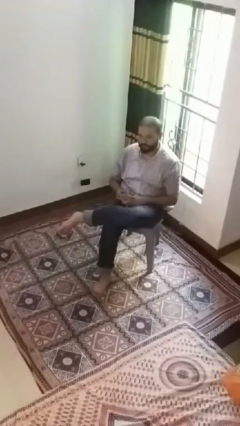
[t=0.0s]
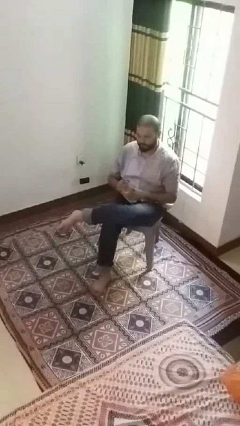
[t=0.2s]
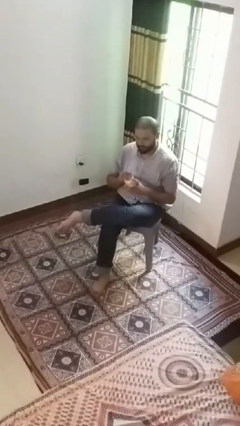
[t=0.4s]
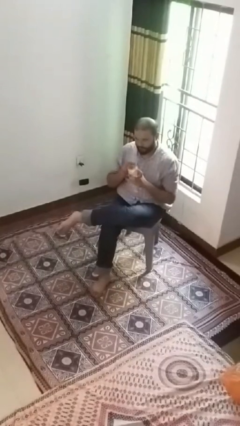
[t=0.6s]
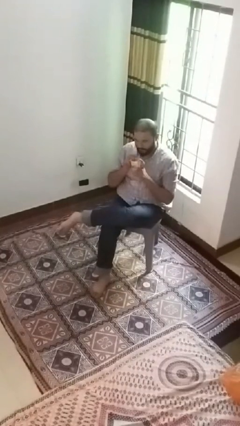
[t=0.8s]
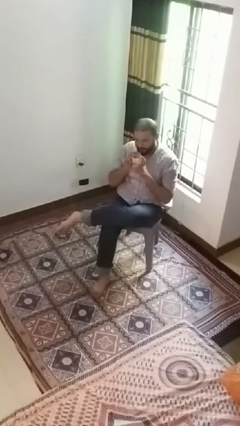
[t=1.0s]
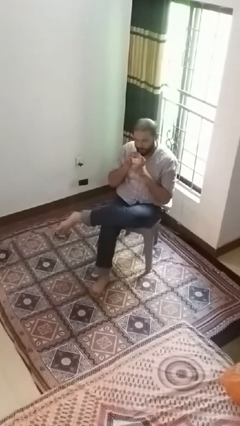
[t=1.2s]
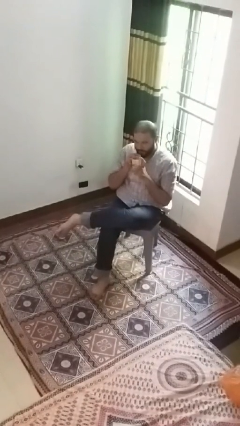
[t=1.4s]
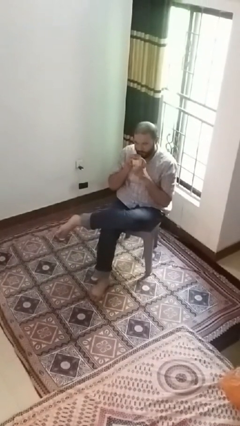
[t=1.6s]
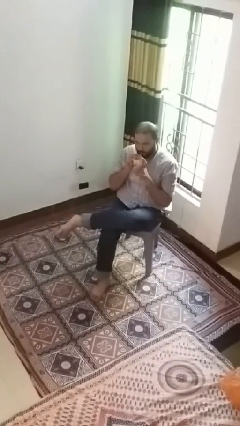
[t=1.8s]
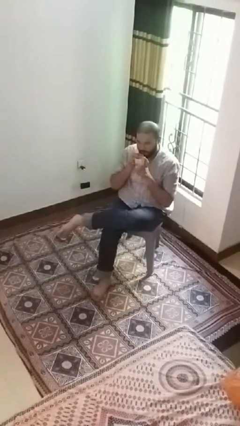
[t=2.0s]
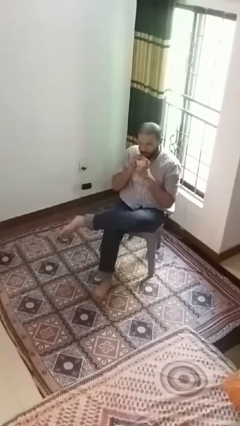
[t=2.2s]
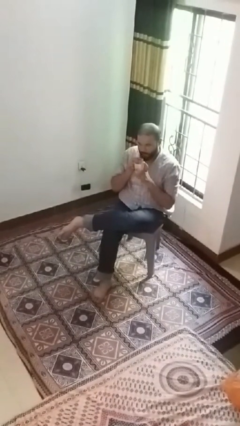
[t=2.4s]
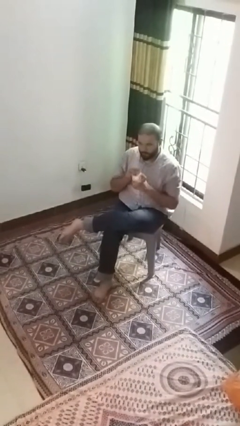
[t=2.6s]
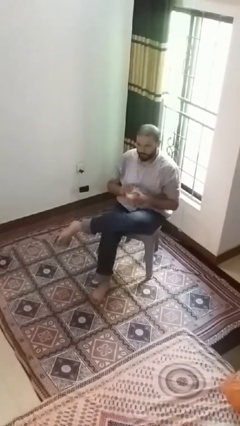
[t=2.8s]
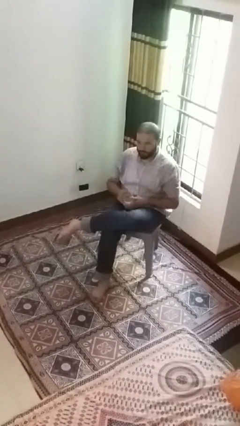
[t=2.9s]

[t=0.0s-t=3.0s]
person drinks from straw

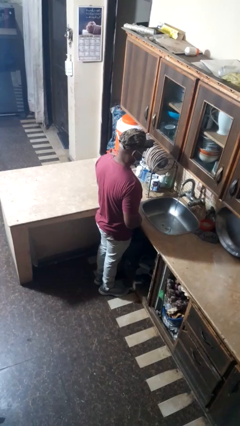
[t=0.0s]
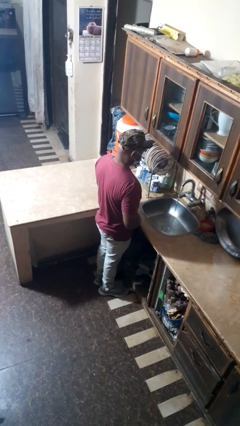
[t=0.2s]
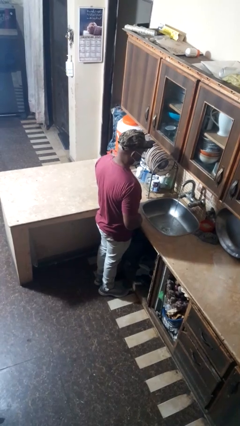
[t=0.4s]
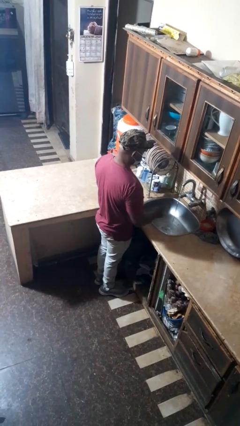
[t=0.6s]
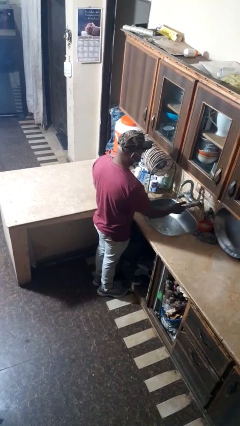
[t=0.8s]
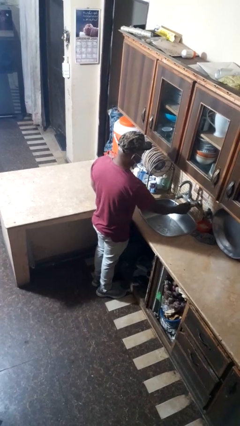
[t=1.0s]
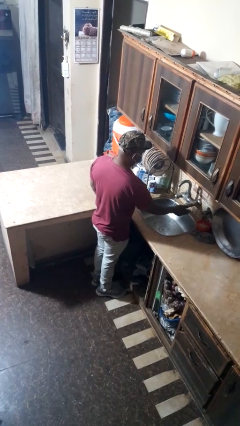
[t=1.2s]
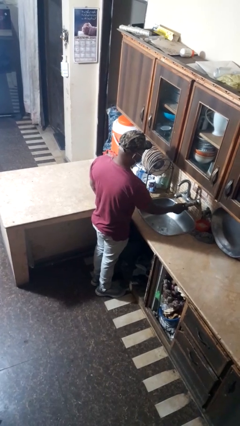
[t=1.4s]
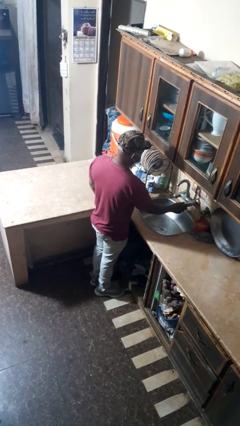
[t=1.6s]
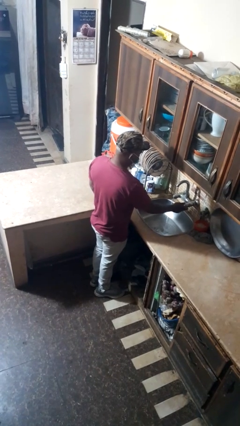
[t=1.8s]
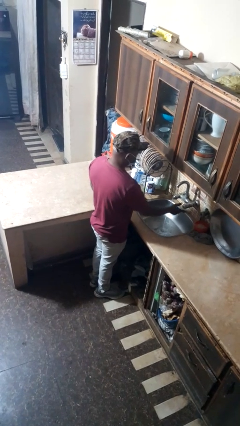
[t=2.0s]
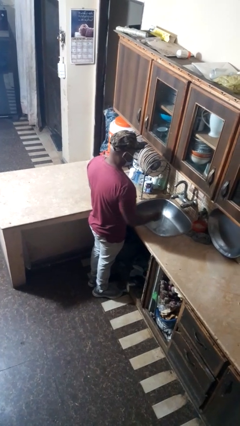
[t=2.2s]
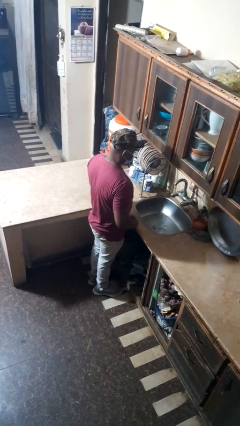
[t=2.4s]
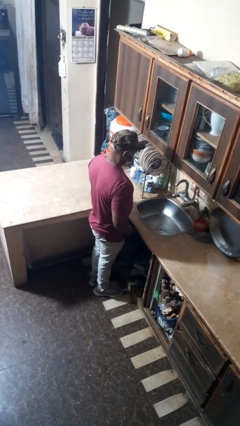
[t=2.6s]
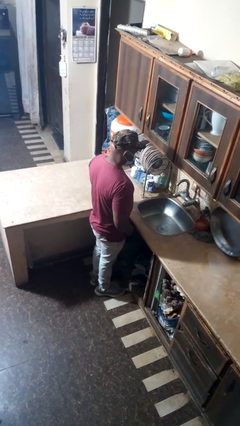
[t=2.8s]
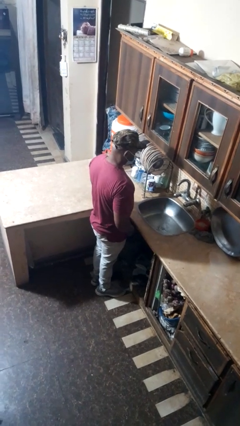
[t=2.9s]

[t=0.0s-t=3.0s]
person turns off faucet

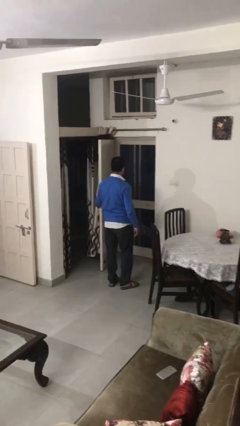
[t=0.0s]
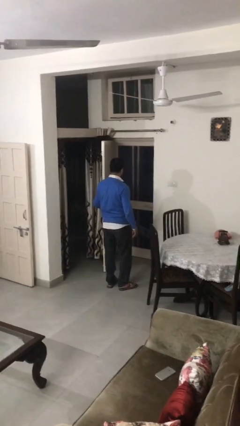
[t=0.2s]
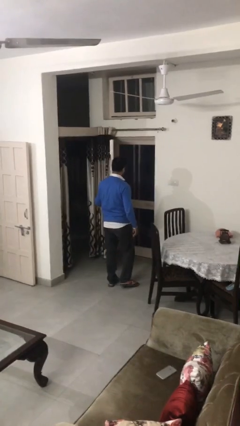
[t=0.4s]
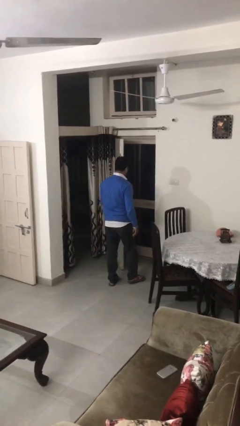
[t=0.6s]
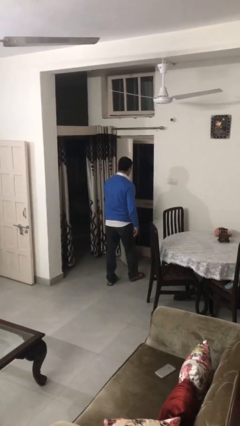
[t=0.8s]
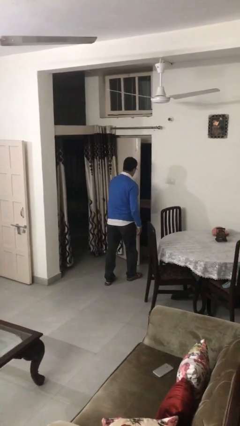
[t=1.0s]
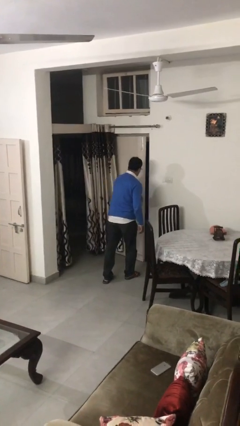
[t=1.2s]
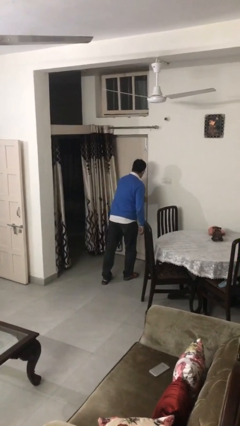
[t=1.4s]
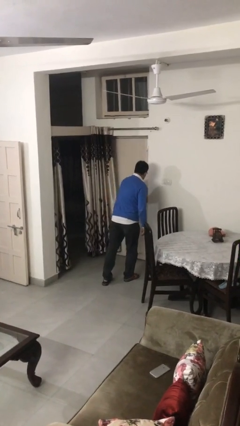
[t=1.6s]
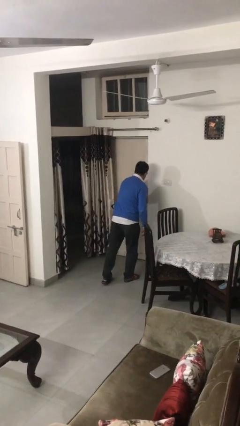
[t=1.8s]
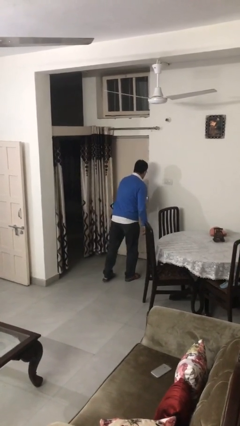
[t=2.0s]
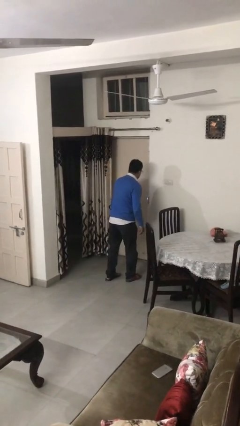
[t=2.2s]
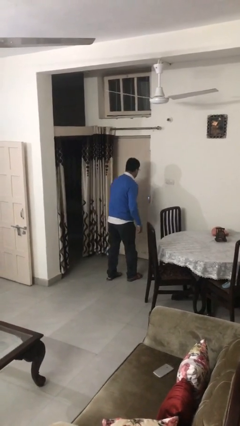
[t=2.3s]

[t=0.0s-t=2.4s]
person closes facility door

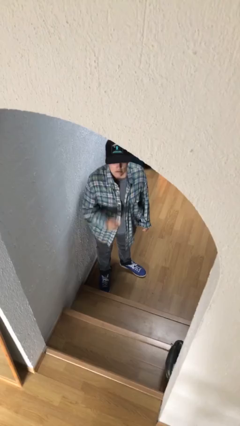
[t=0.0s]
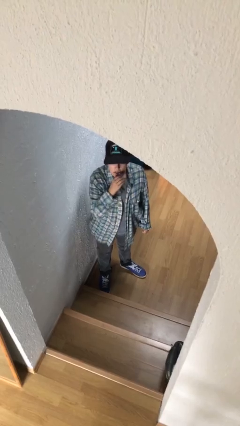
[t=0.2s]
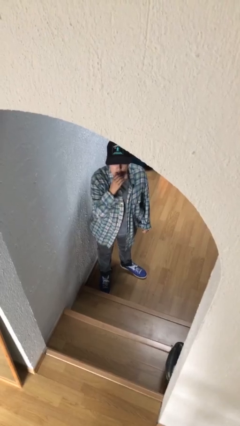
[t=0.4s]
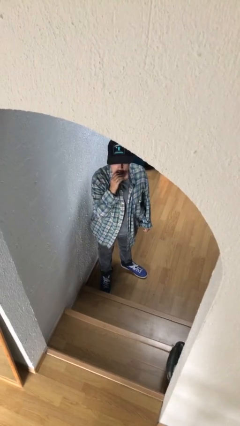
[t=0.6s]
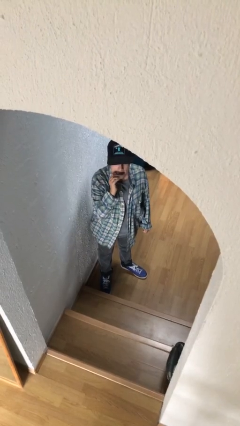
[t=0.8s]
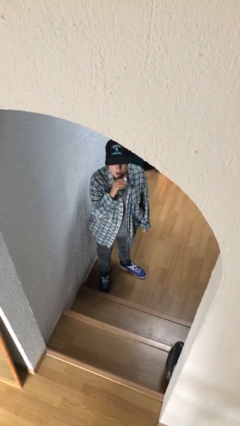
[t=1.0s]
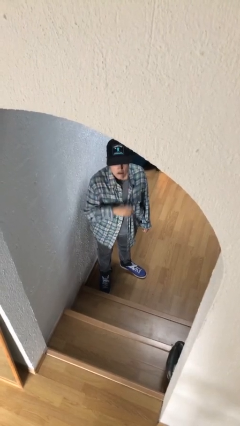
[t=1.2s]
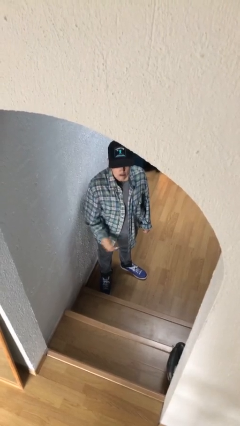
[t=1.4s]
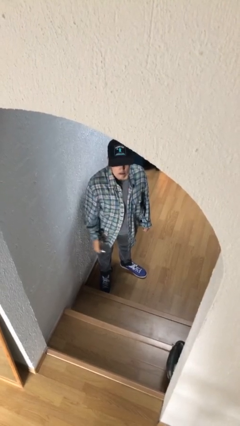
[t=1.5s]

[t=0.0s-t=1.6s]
person applies lip makeup

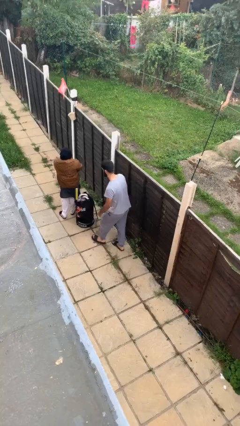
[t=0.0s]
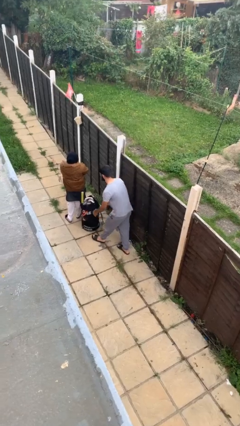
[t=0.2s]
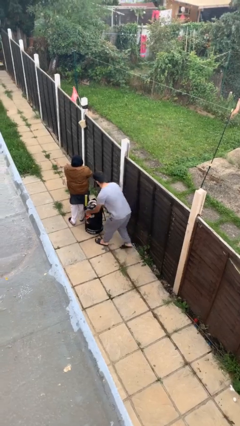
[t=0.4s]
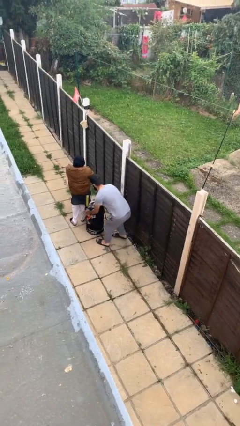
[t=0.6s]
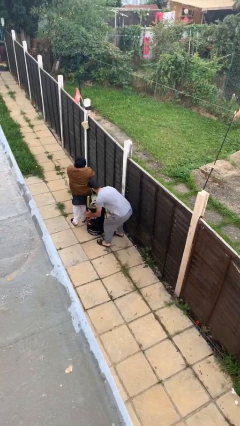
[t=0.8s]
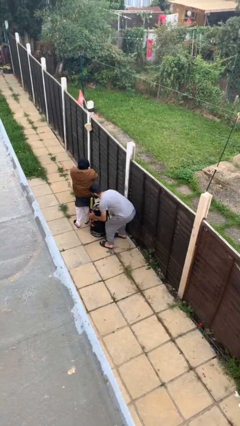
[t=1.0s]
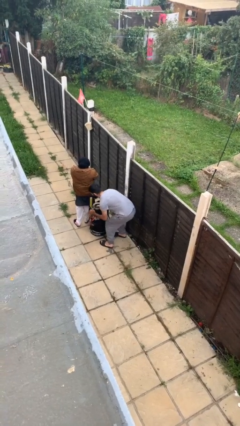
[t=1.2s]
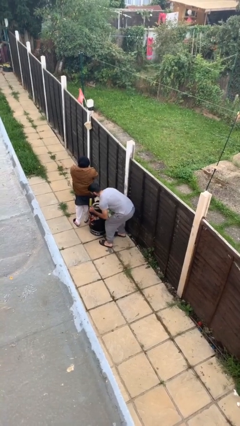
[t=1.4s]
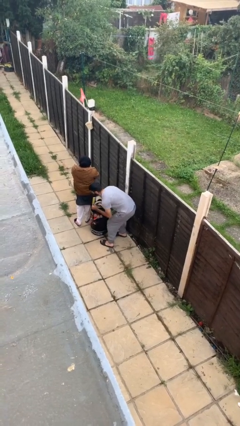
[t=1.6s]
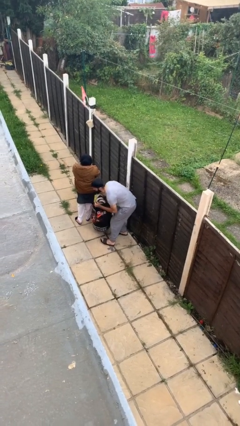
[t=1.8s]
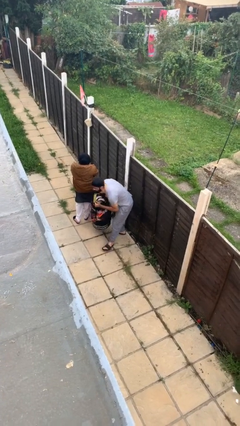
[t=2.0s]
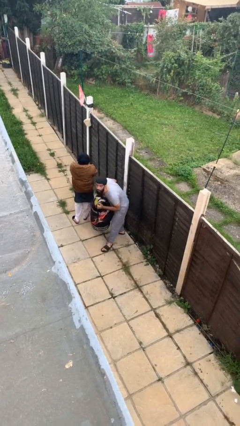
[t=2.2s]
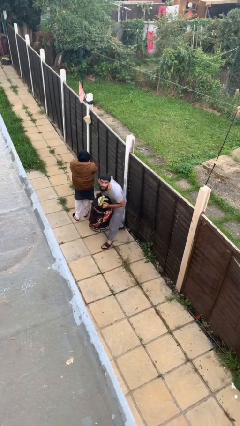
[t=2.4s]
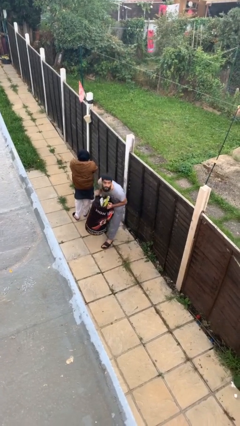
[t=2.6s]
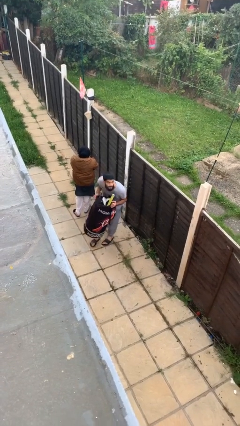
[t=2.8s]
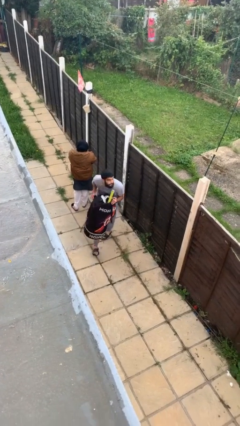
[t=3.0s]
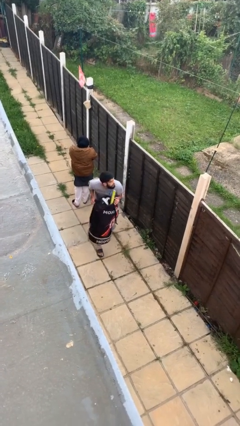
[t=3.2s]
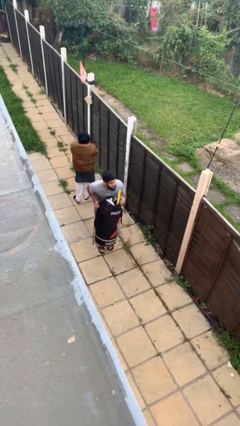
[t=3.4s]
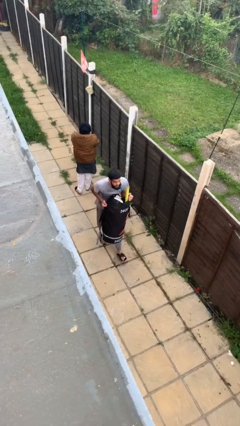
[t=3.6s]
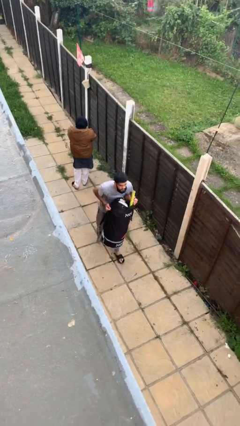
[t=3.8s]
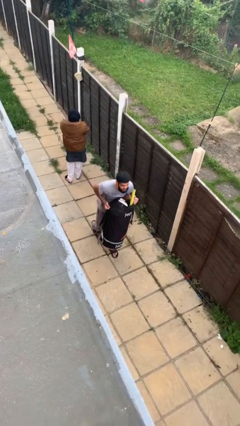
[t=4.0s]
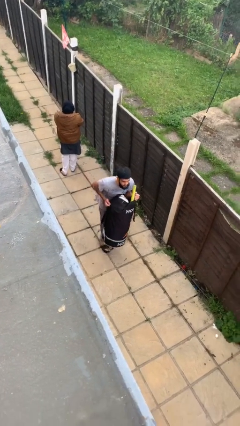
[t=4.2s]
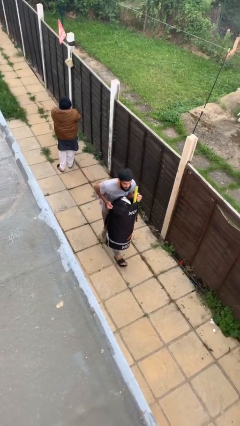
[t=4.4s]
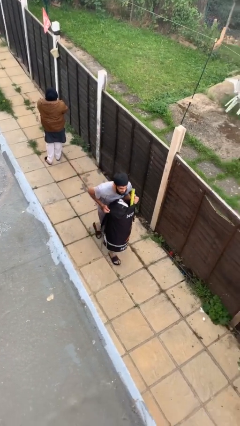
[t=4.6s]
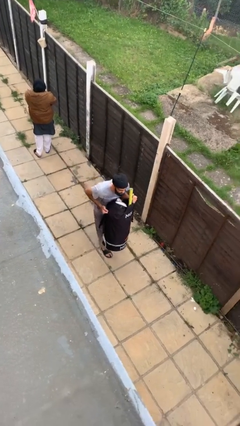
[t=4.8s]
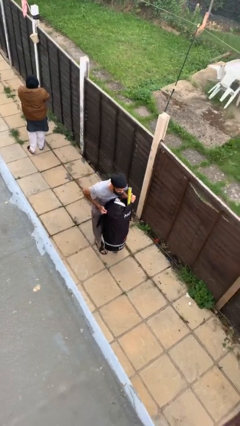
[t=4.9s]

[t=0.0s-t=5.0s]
person steals object from person

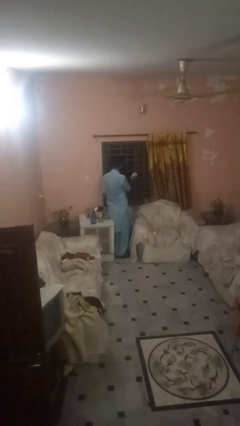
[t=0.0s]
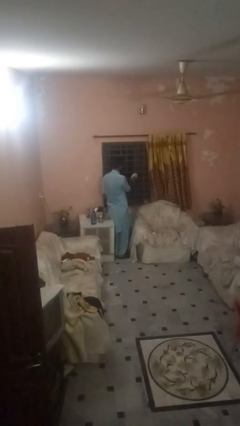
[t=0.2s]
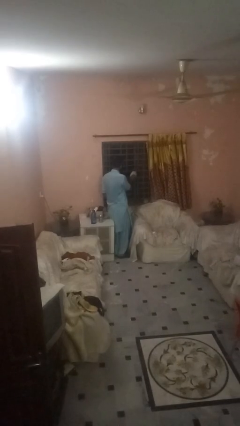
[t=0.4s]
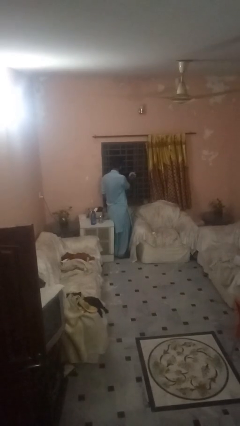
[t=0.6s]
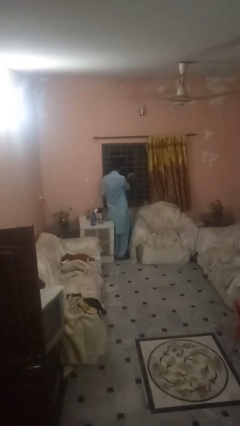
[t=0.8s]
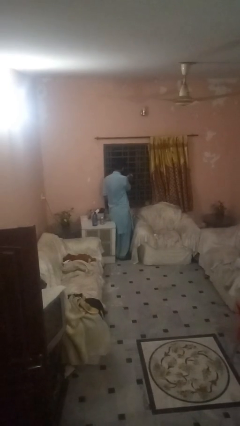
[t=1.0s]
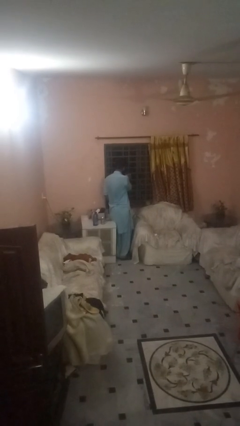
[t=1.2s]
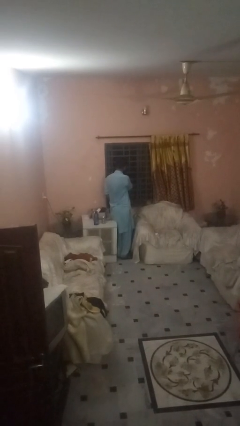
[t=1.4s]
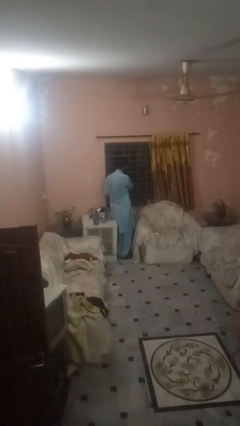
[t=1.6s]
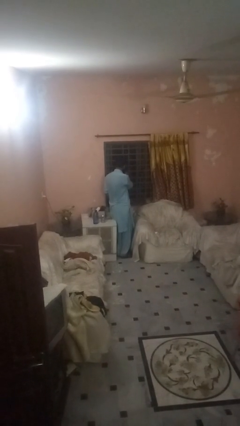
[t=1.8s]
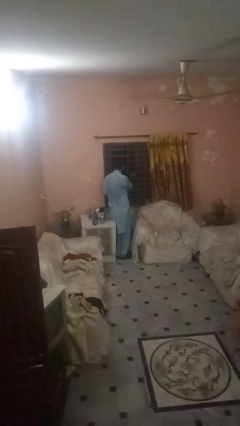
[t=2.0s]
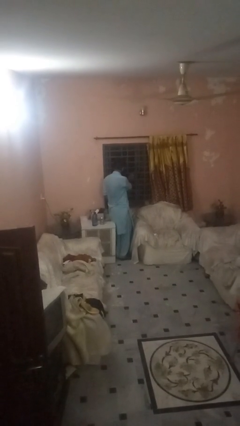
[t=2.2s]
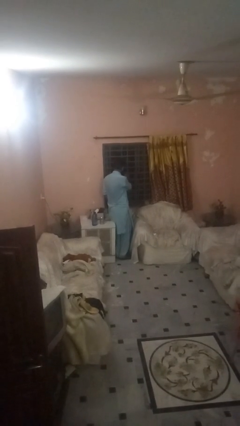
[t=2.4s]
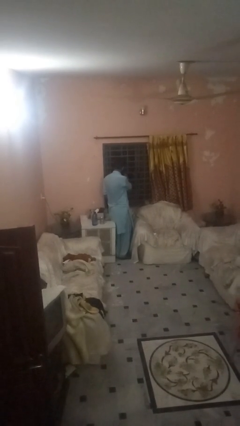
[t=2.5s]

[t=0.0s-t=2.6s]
person washes window
